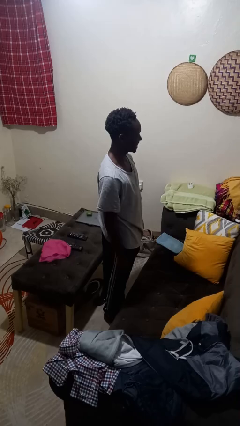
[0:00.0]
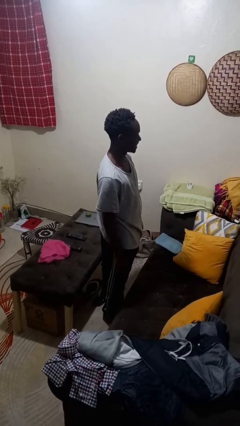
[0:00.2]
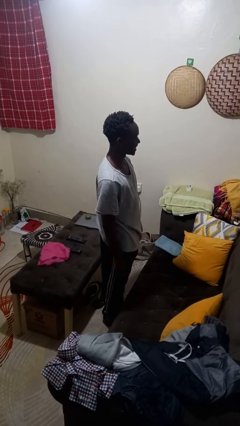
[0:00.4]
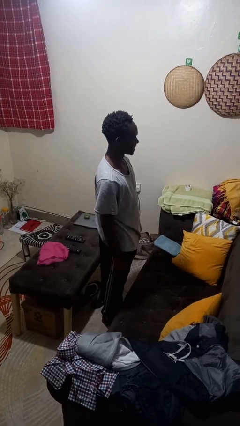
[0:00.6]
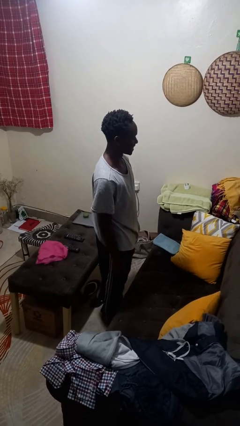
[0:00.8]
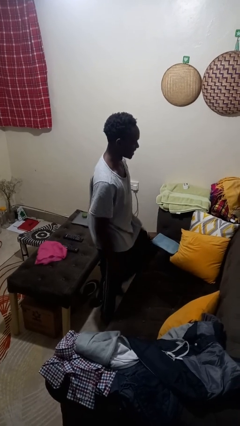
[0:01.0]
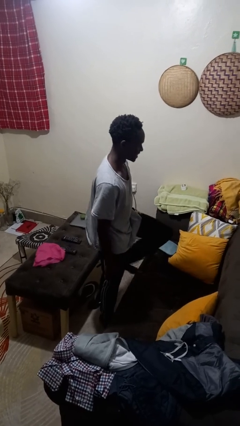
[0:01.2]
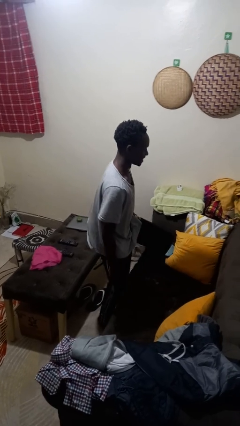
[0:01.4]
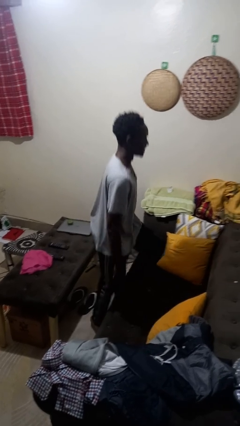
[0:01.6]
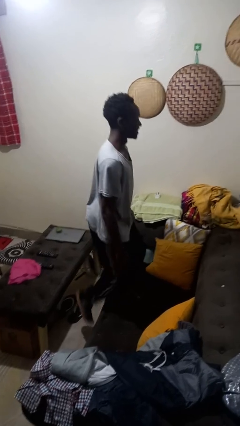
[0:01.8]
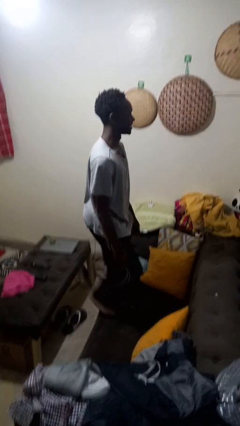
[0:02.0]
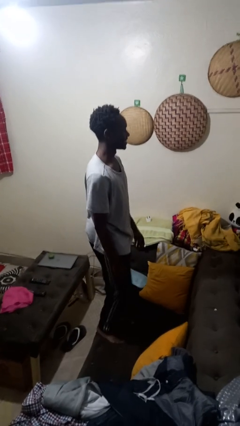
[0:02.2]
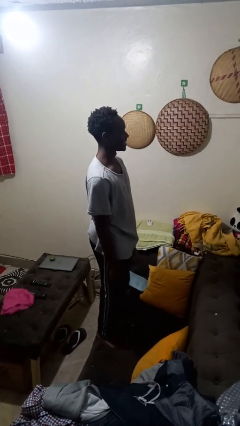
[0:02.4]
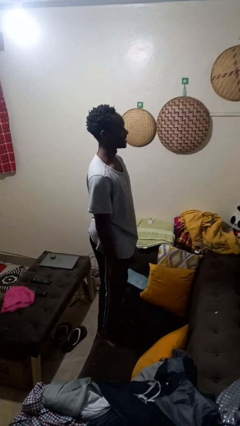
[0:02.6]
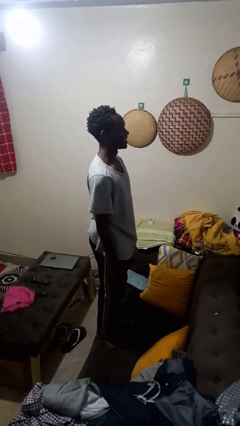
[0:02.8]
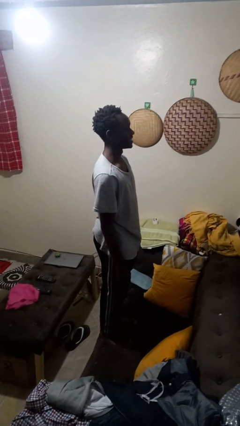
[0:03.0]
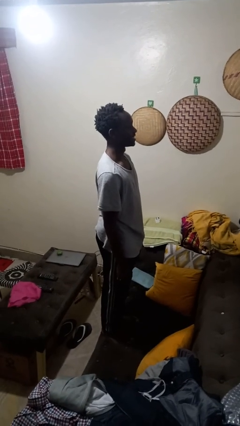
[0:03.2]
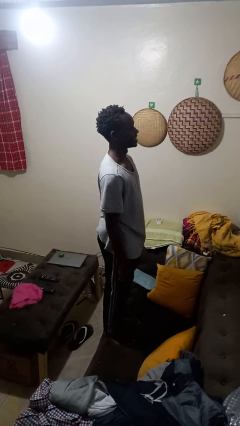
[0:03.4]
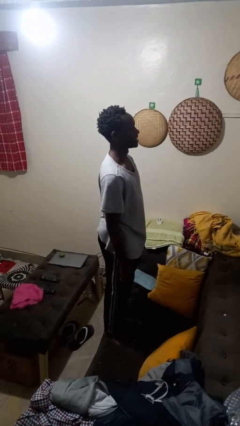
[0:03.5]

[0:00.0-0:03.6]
person climbs on couch

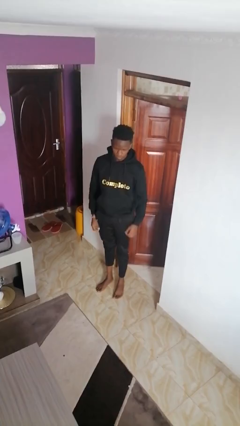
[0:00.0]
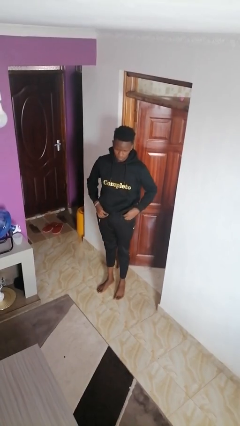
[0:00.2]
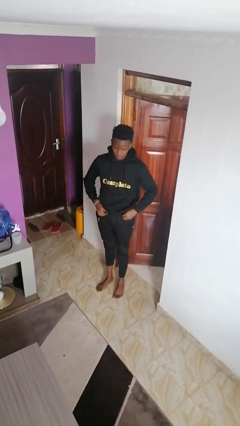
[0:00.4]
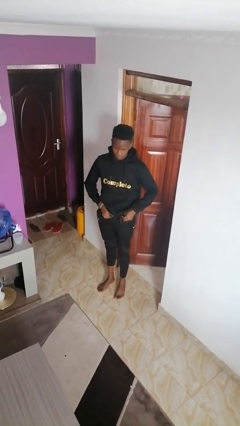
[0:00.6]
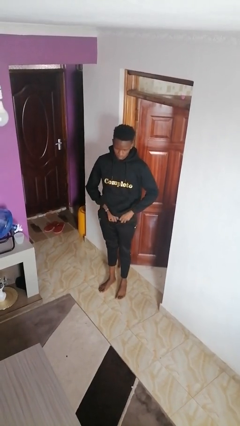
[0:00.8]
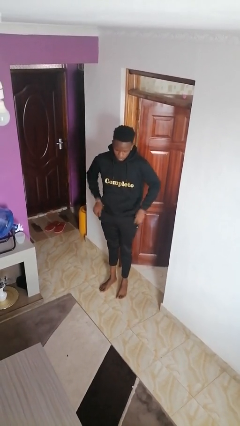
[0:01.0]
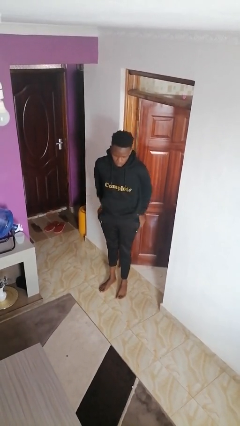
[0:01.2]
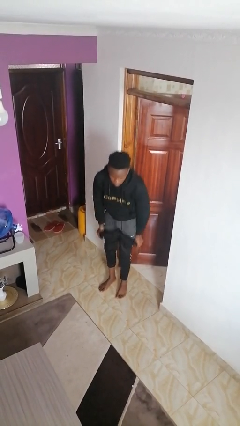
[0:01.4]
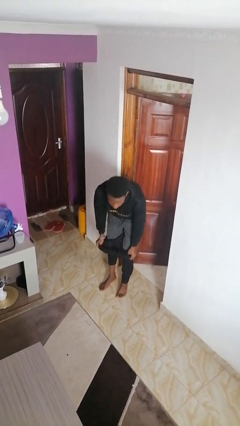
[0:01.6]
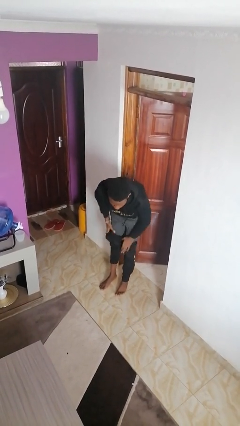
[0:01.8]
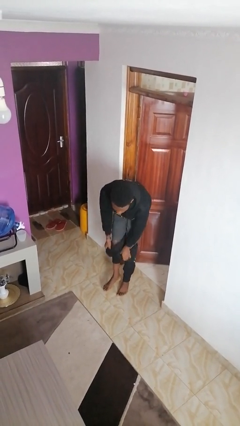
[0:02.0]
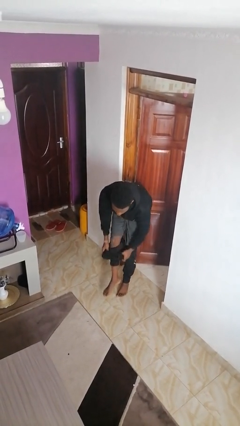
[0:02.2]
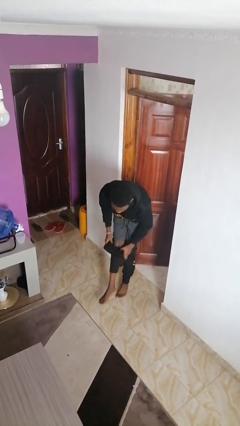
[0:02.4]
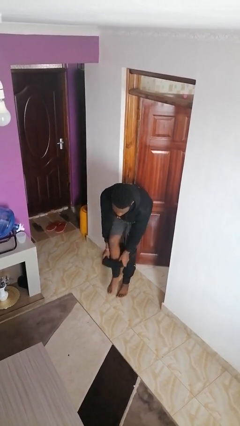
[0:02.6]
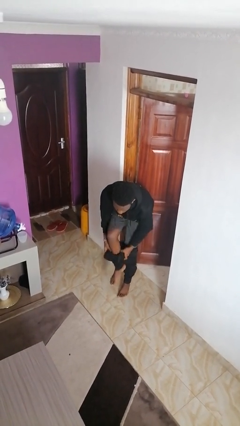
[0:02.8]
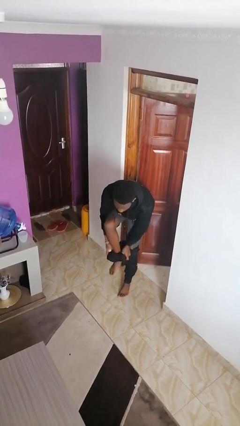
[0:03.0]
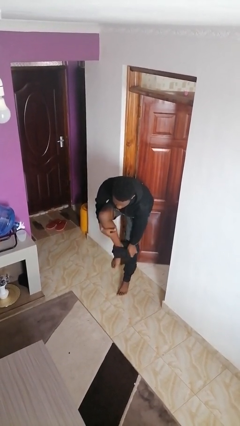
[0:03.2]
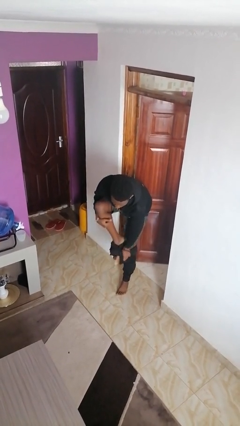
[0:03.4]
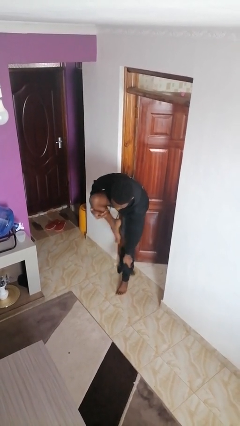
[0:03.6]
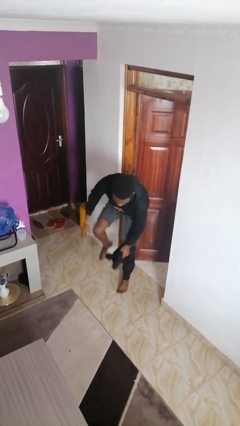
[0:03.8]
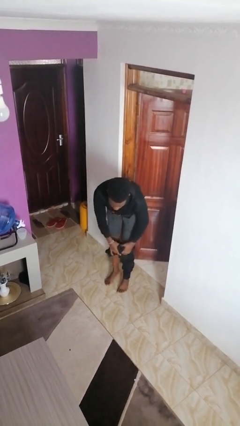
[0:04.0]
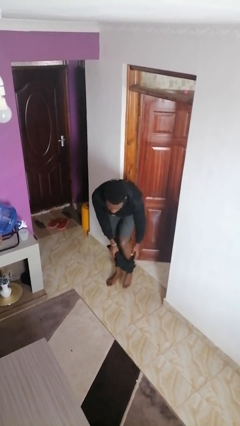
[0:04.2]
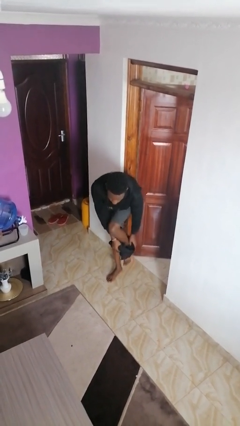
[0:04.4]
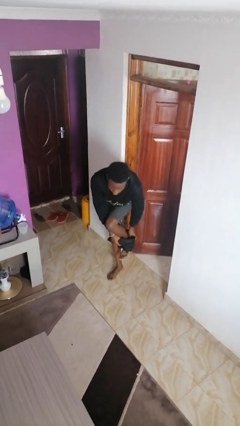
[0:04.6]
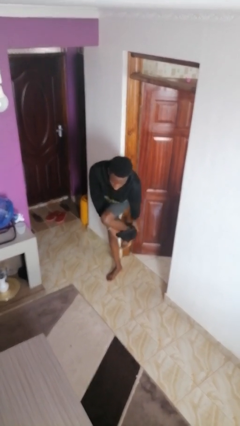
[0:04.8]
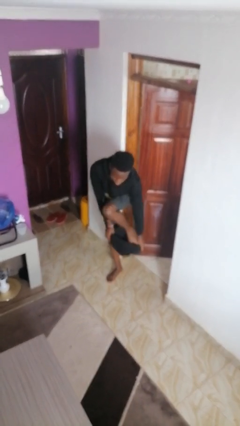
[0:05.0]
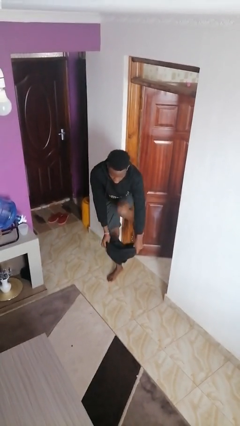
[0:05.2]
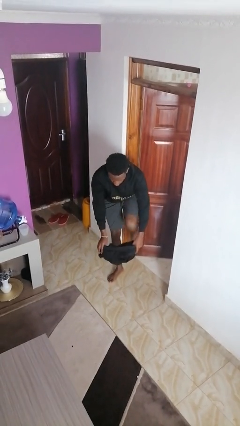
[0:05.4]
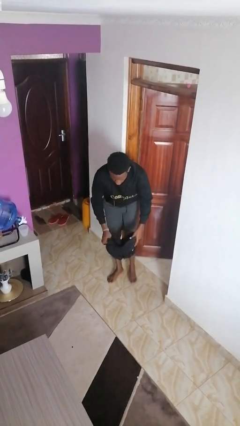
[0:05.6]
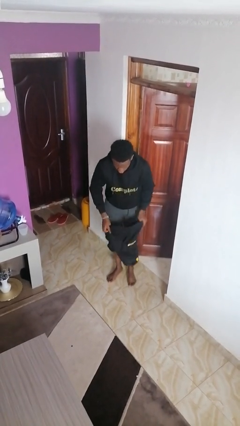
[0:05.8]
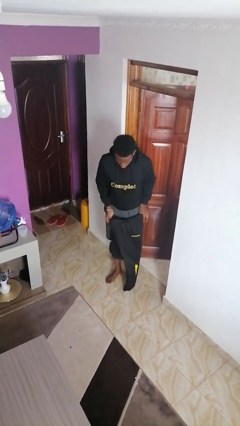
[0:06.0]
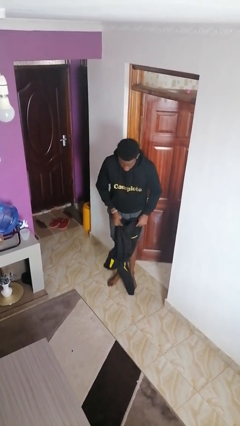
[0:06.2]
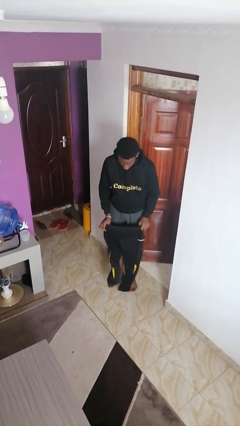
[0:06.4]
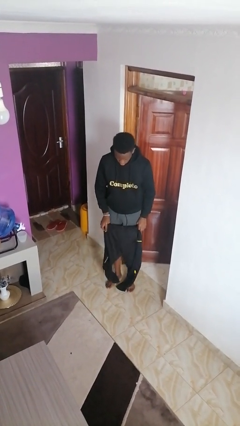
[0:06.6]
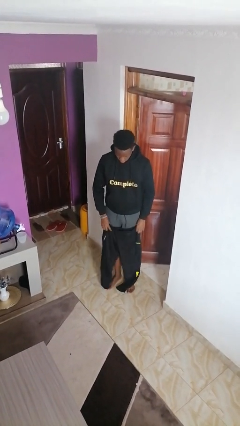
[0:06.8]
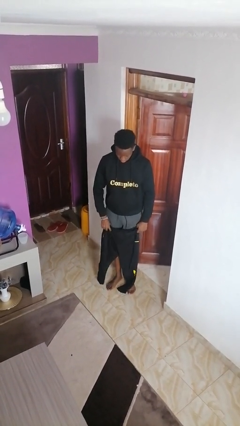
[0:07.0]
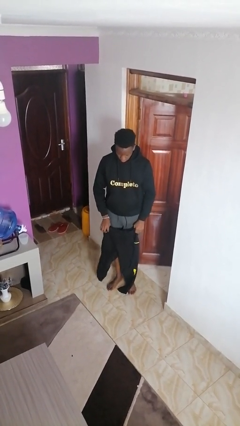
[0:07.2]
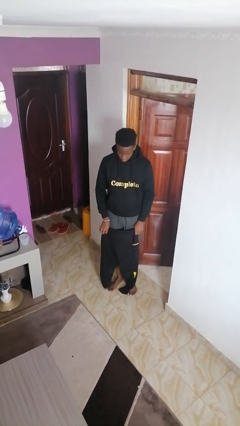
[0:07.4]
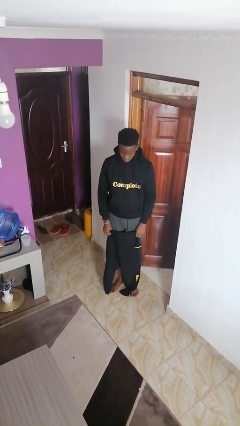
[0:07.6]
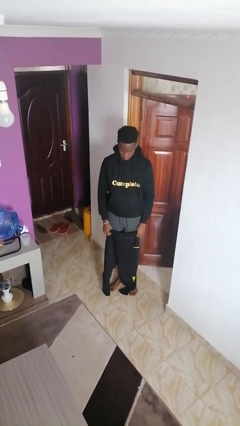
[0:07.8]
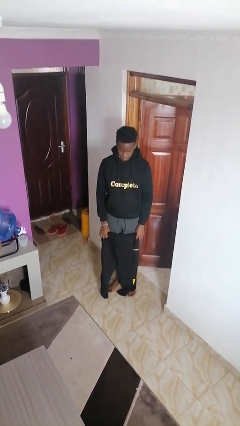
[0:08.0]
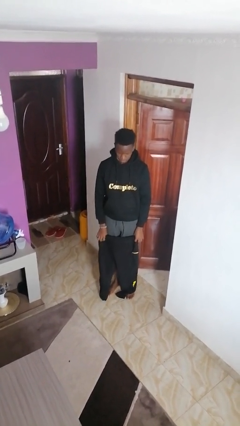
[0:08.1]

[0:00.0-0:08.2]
person takes off pants

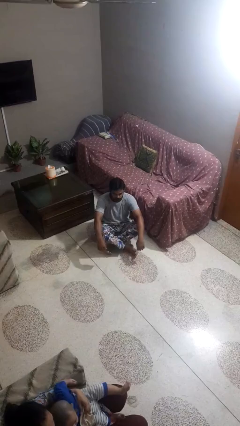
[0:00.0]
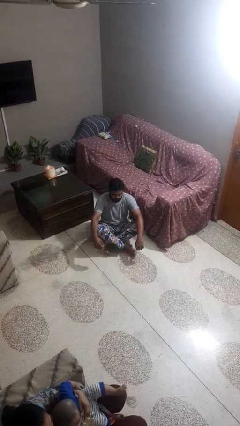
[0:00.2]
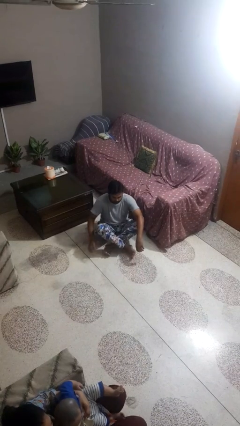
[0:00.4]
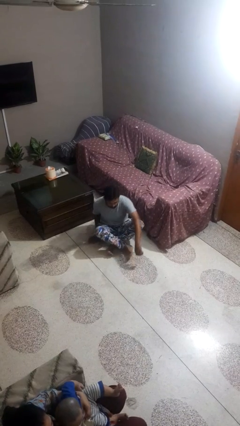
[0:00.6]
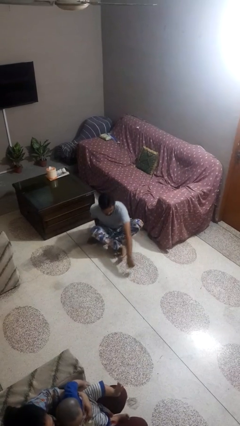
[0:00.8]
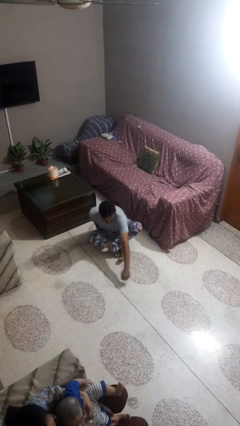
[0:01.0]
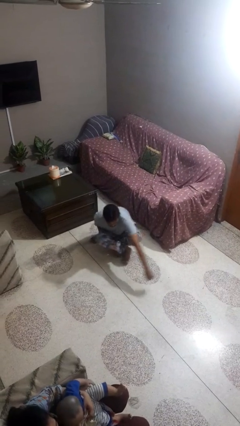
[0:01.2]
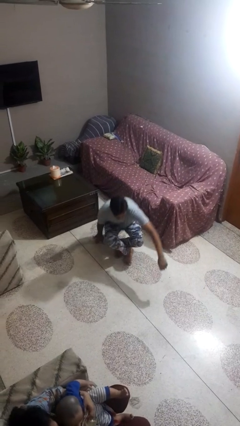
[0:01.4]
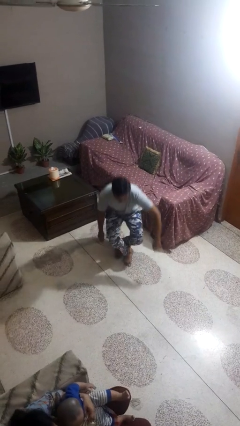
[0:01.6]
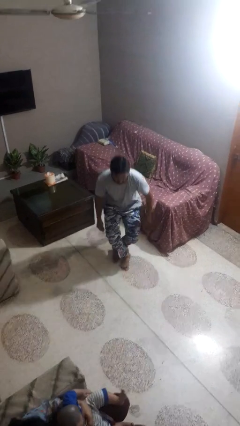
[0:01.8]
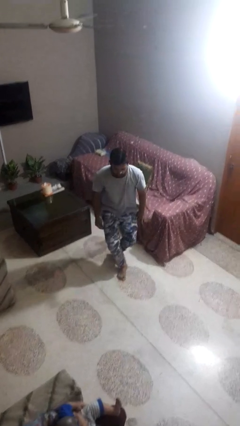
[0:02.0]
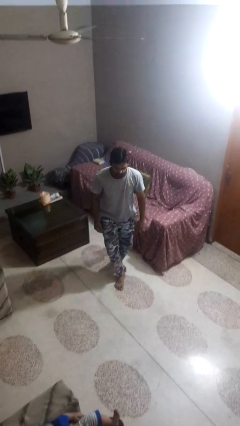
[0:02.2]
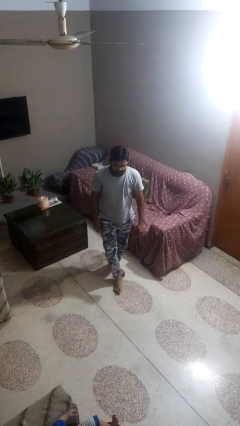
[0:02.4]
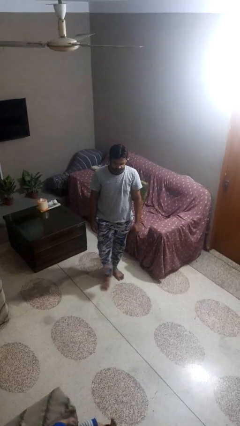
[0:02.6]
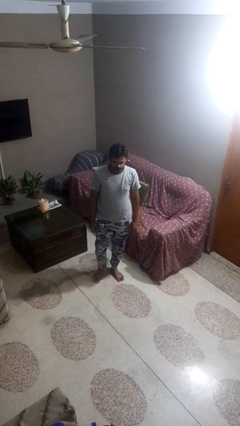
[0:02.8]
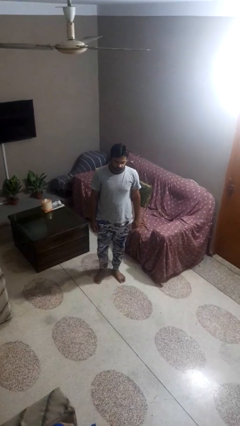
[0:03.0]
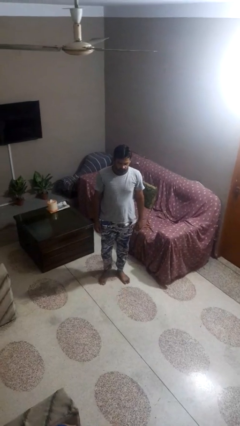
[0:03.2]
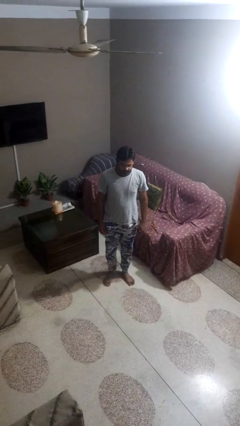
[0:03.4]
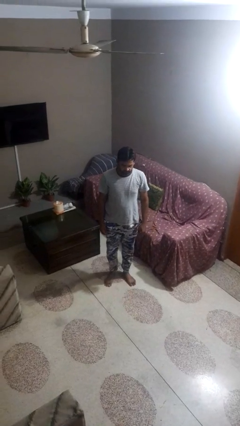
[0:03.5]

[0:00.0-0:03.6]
person stands up from floor

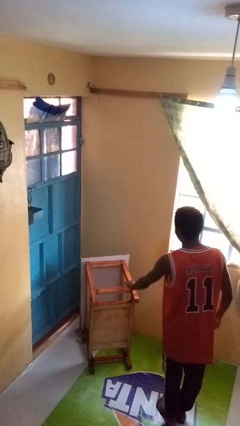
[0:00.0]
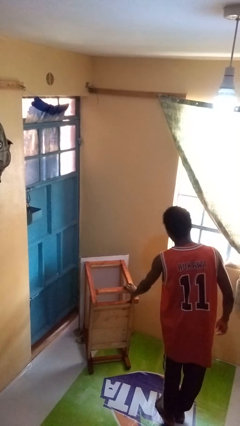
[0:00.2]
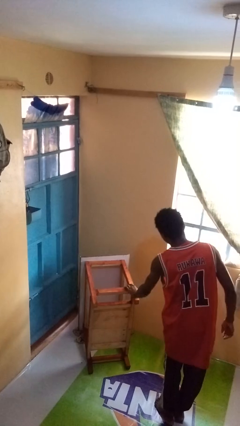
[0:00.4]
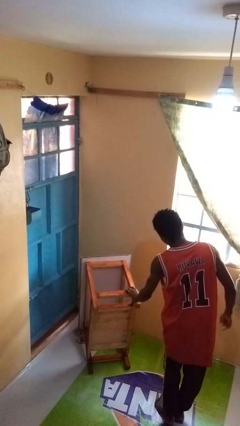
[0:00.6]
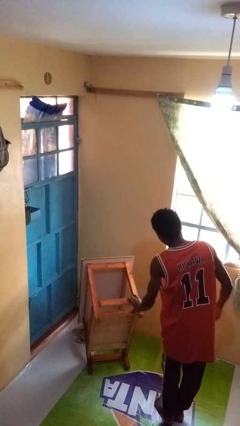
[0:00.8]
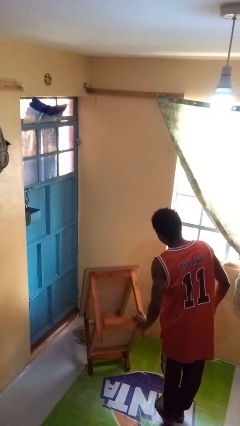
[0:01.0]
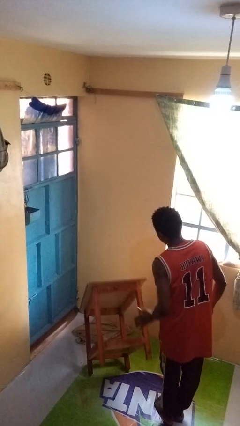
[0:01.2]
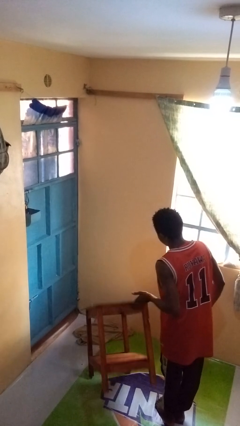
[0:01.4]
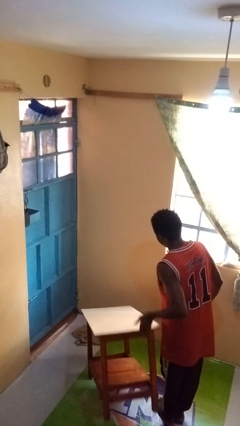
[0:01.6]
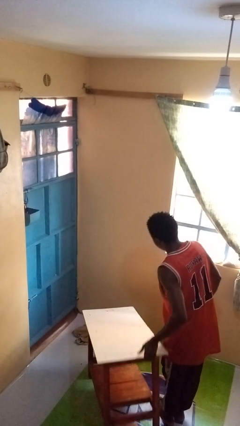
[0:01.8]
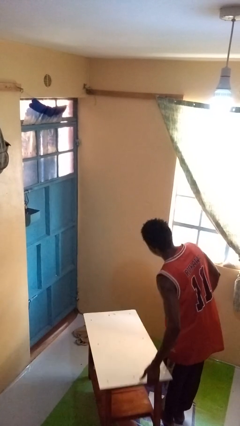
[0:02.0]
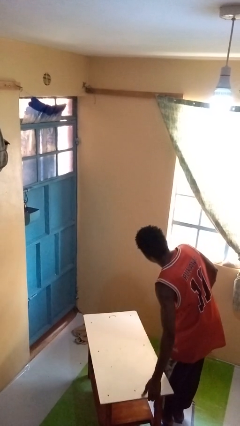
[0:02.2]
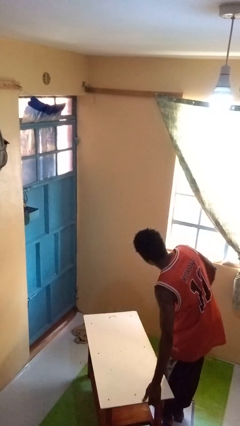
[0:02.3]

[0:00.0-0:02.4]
person sets upright furniture

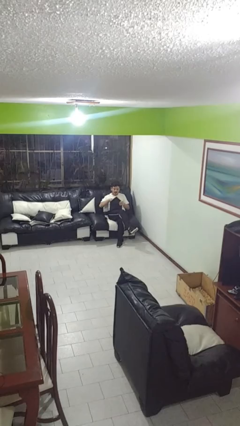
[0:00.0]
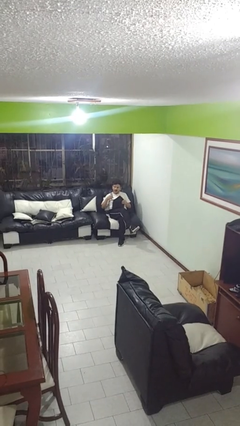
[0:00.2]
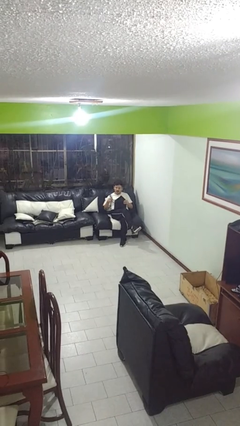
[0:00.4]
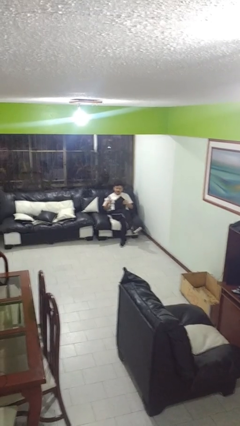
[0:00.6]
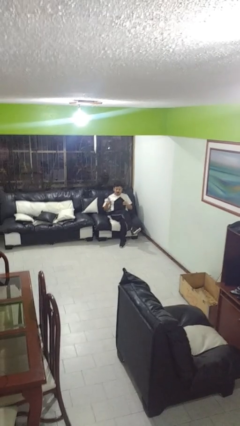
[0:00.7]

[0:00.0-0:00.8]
person takes object from purse
